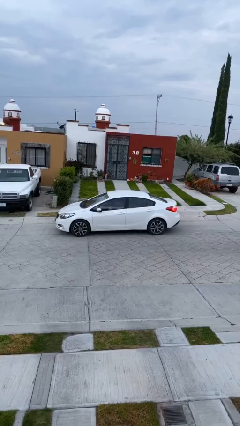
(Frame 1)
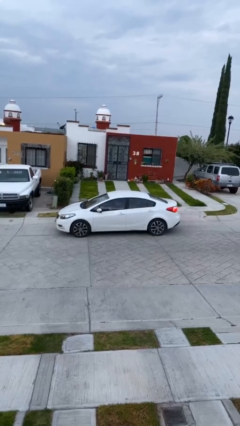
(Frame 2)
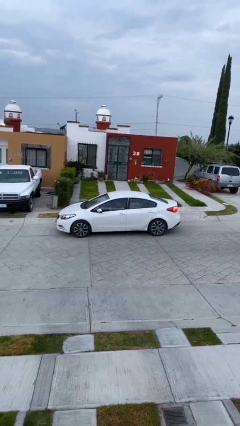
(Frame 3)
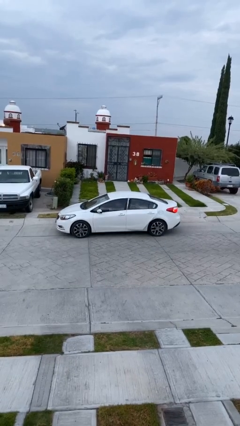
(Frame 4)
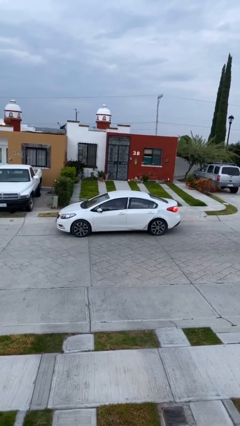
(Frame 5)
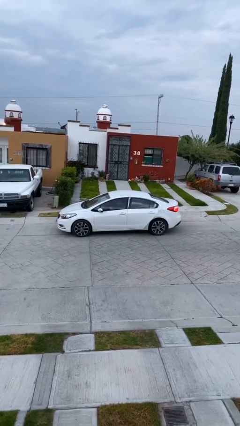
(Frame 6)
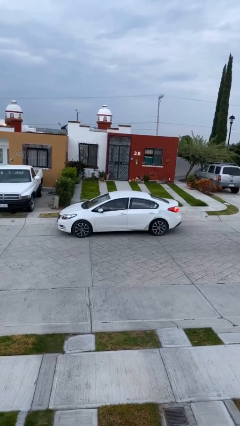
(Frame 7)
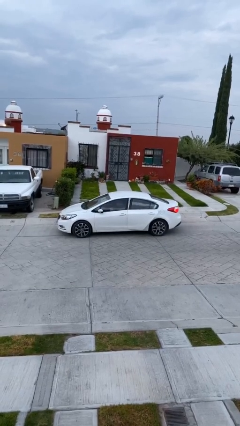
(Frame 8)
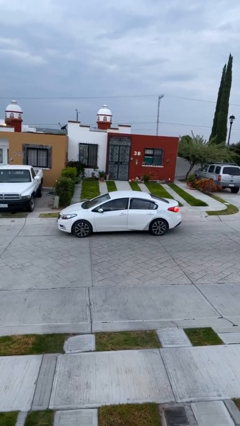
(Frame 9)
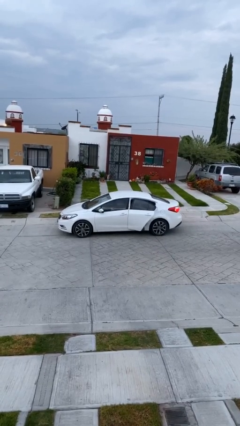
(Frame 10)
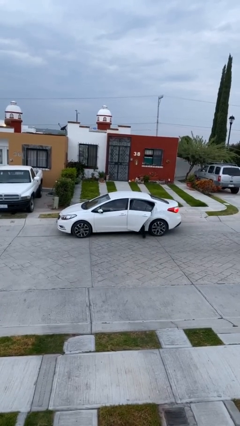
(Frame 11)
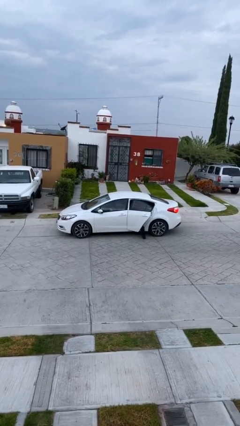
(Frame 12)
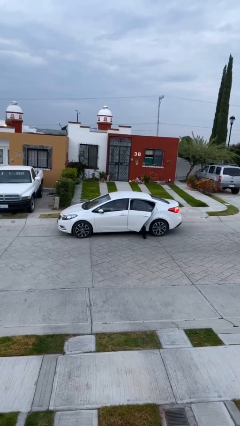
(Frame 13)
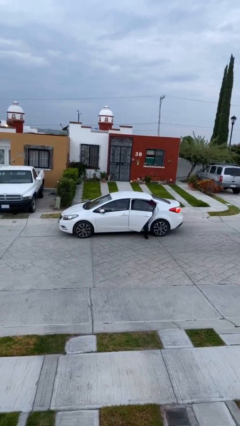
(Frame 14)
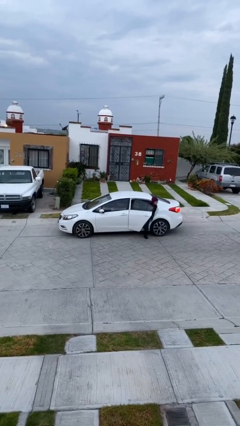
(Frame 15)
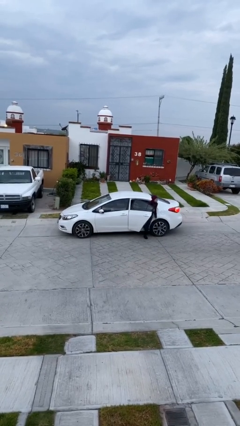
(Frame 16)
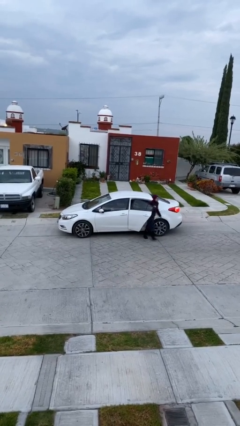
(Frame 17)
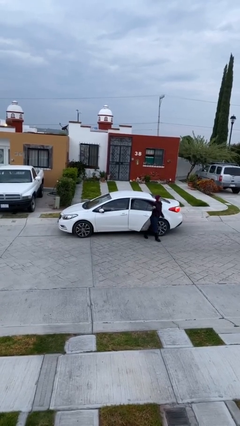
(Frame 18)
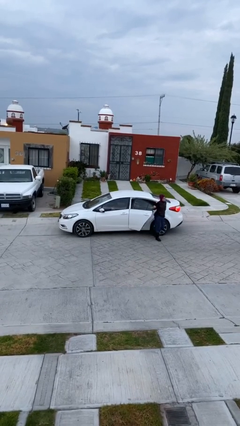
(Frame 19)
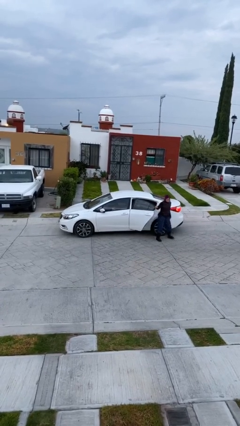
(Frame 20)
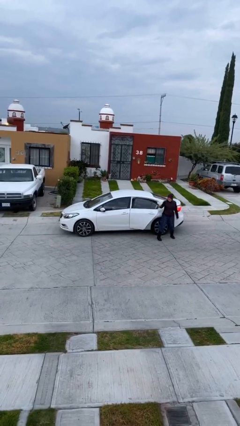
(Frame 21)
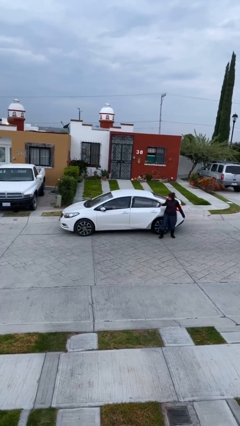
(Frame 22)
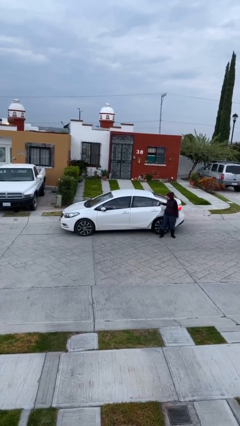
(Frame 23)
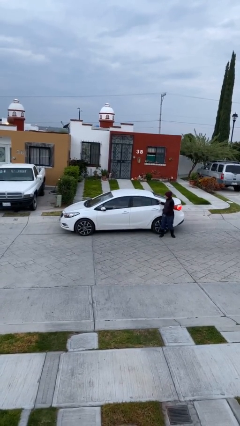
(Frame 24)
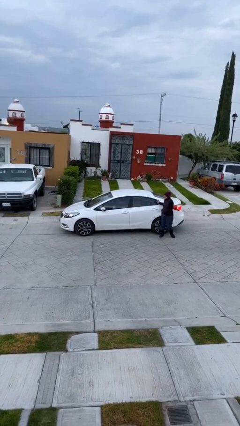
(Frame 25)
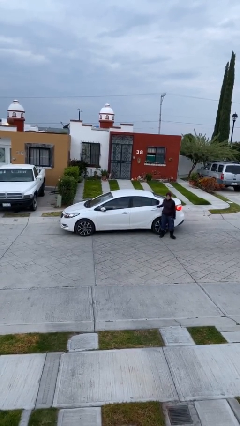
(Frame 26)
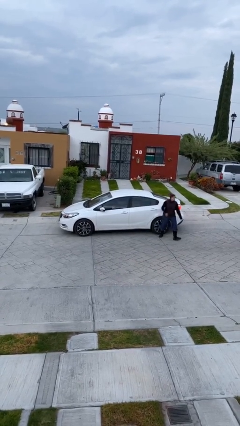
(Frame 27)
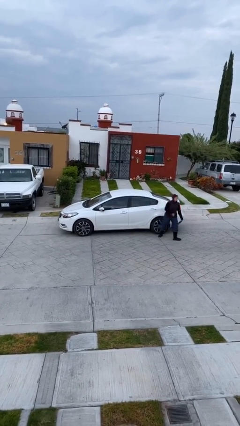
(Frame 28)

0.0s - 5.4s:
car drops off person

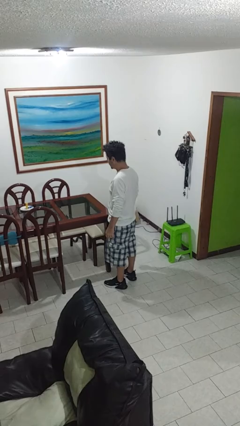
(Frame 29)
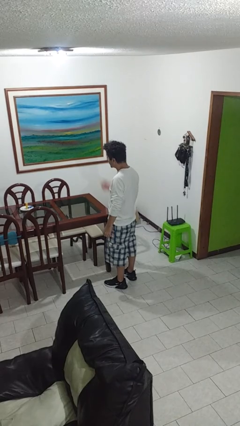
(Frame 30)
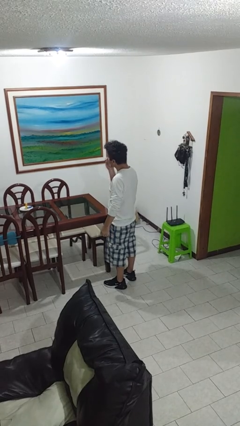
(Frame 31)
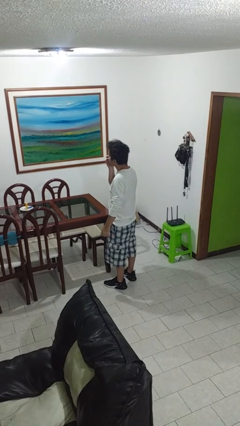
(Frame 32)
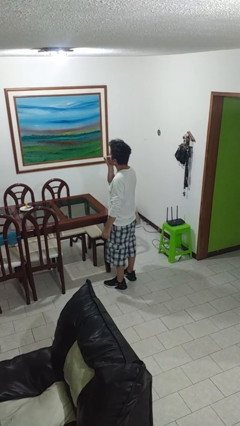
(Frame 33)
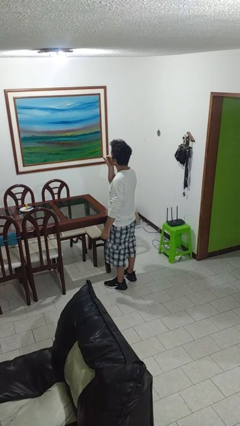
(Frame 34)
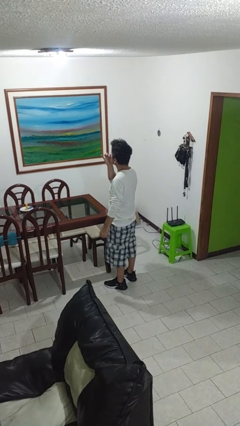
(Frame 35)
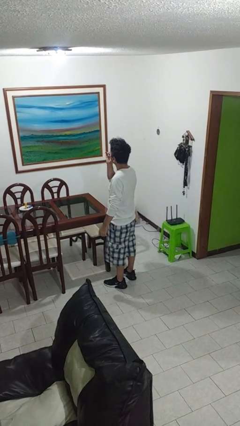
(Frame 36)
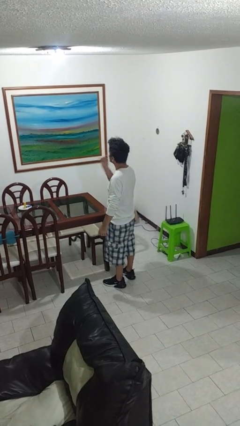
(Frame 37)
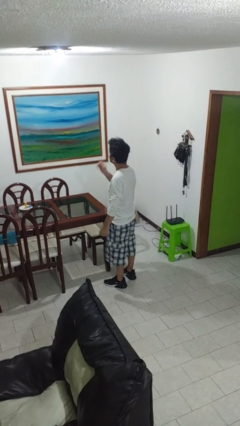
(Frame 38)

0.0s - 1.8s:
person licks fingers

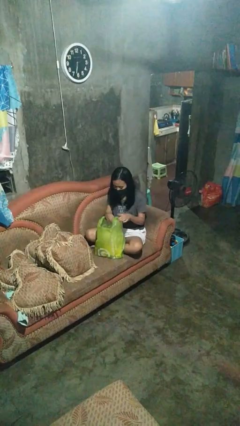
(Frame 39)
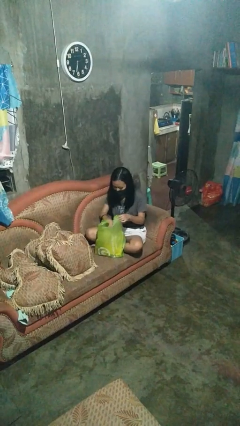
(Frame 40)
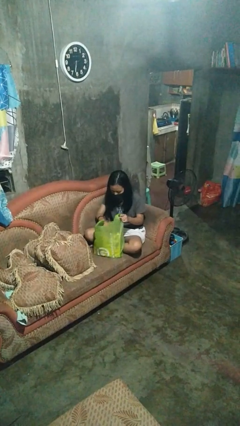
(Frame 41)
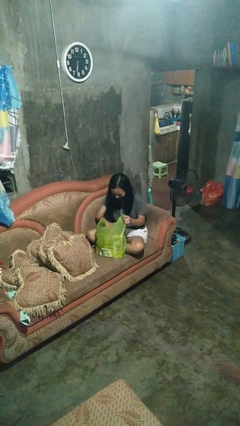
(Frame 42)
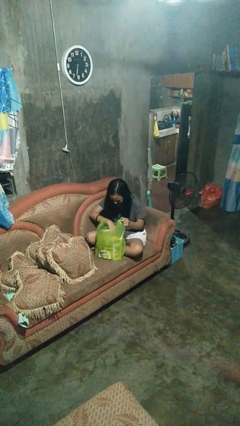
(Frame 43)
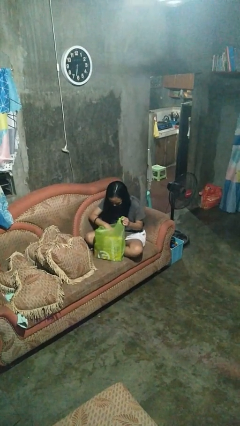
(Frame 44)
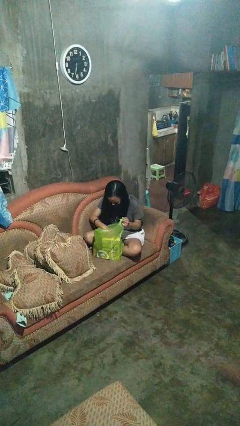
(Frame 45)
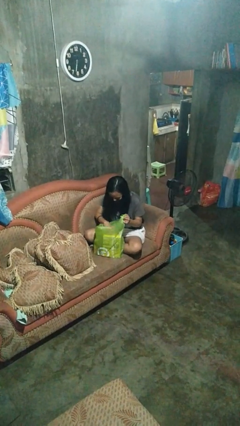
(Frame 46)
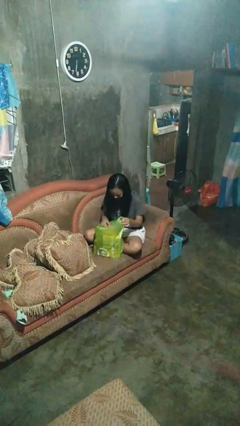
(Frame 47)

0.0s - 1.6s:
person searches in bag

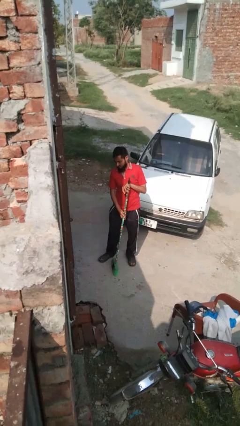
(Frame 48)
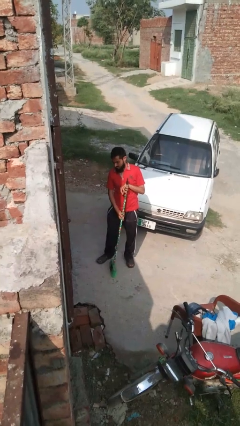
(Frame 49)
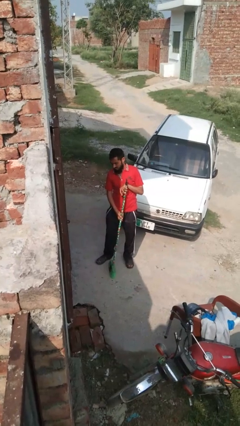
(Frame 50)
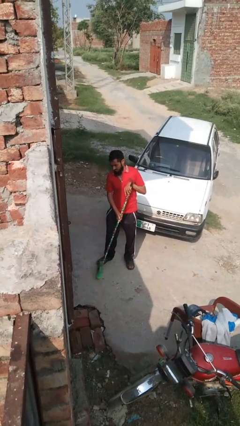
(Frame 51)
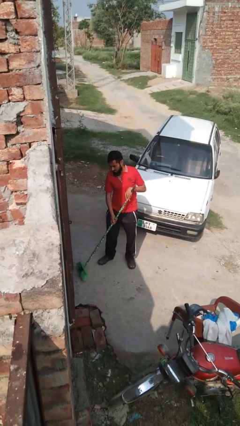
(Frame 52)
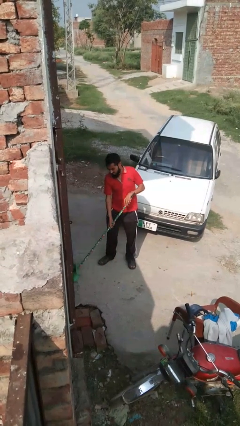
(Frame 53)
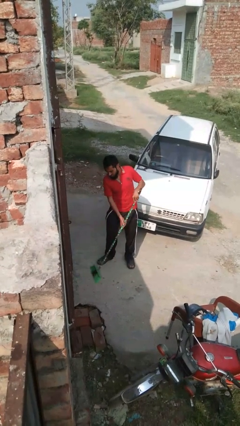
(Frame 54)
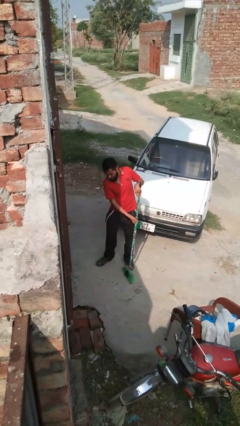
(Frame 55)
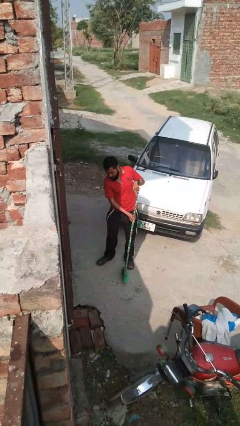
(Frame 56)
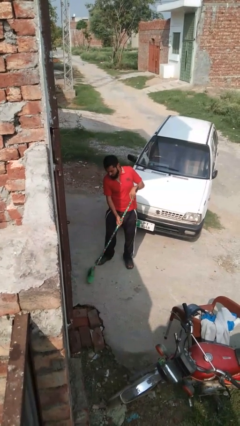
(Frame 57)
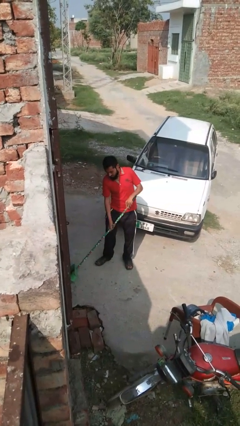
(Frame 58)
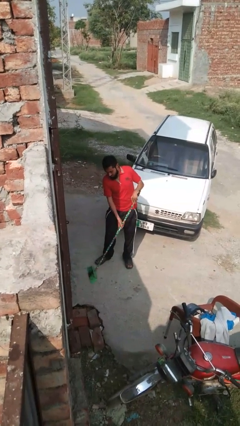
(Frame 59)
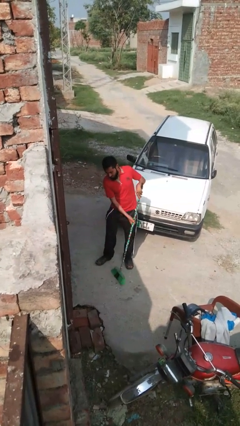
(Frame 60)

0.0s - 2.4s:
person sweeps floor

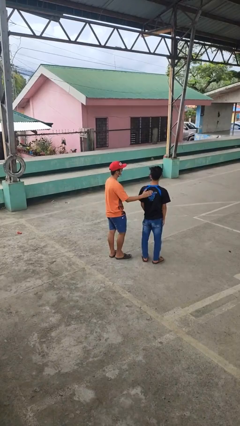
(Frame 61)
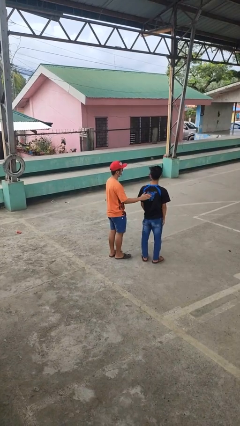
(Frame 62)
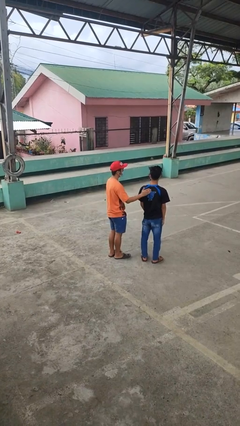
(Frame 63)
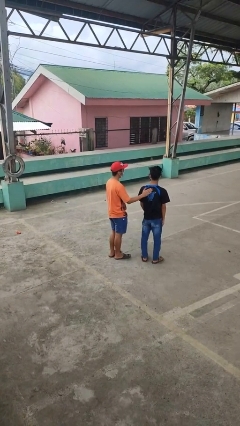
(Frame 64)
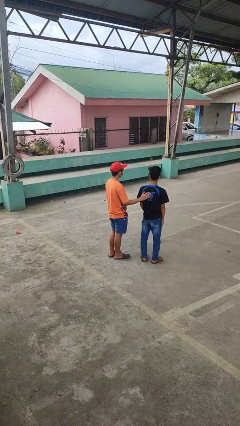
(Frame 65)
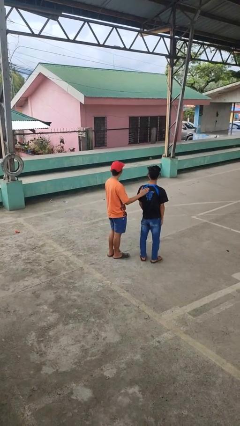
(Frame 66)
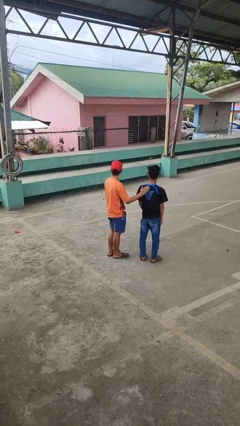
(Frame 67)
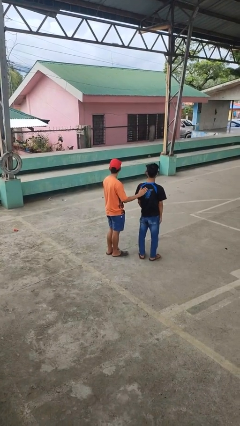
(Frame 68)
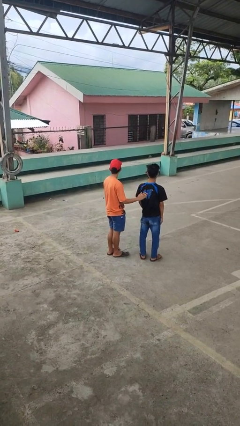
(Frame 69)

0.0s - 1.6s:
person touches back of person

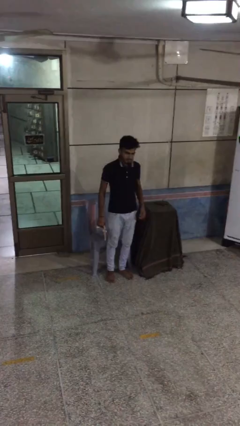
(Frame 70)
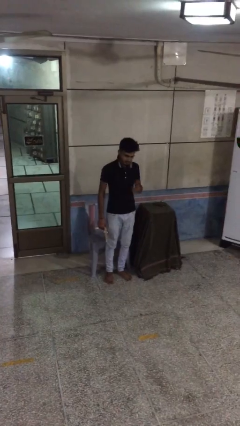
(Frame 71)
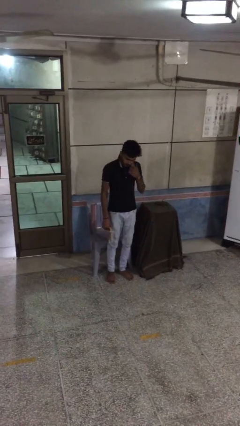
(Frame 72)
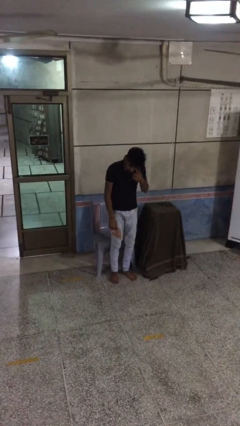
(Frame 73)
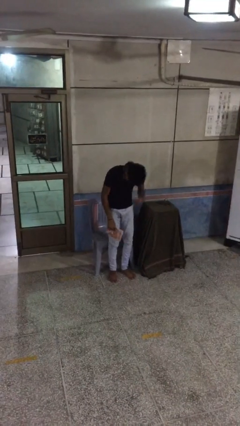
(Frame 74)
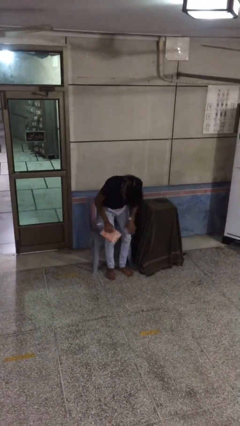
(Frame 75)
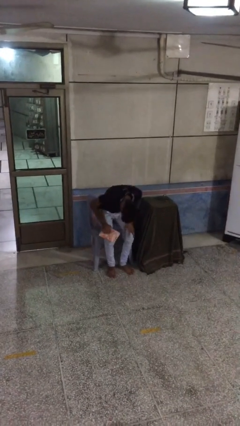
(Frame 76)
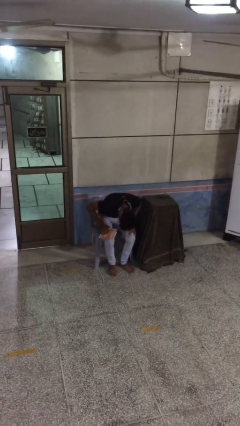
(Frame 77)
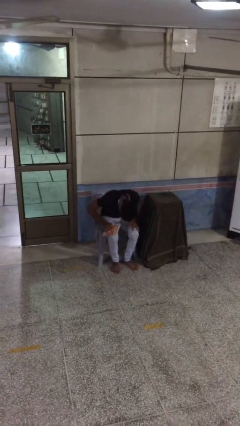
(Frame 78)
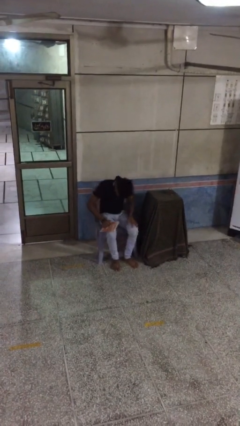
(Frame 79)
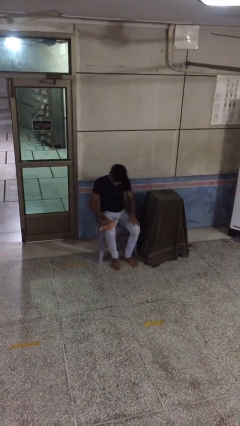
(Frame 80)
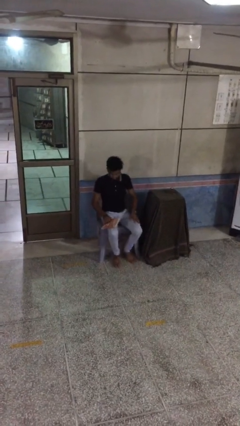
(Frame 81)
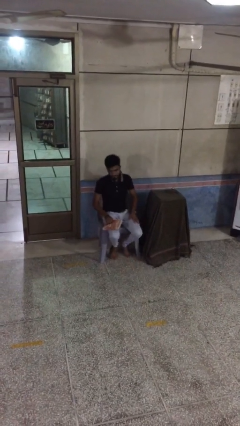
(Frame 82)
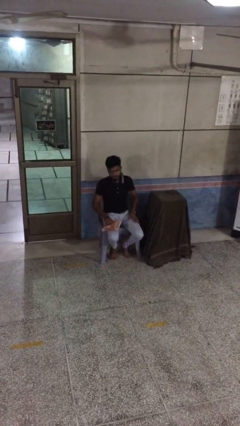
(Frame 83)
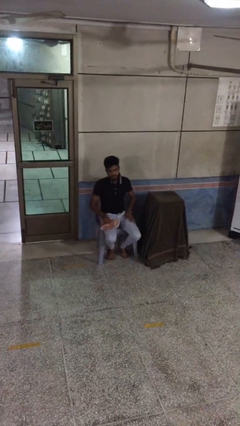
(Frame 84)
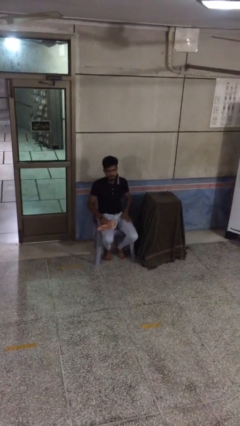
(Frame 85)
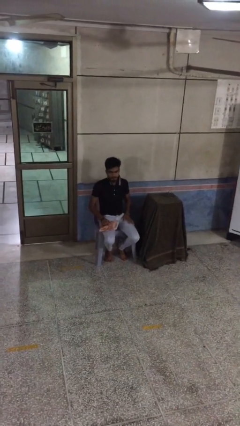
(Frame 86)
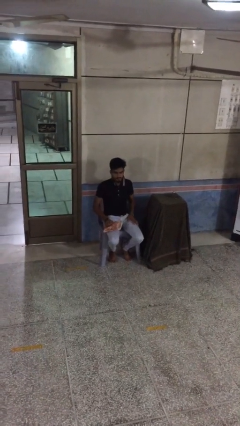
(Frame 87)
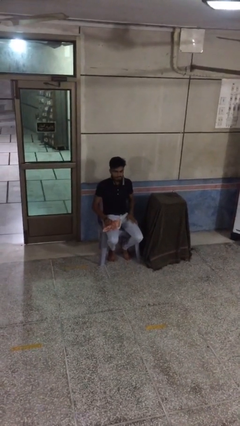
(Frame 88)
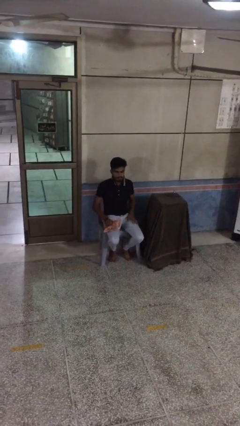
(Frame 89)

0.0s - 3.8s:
person sits down

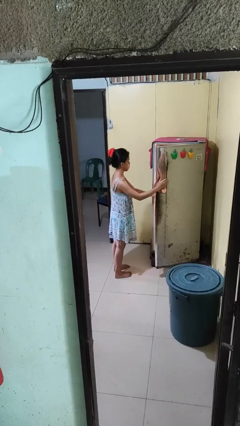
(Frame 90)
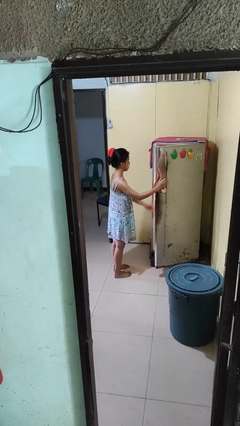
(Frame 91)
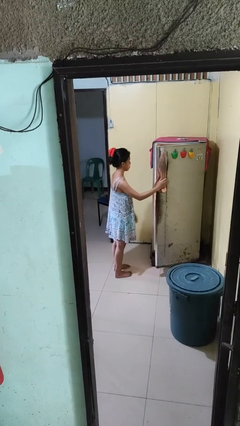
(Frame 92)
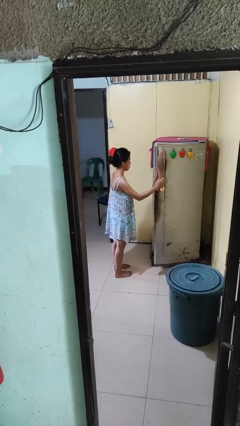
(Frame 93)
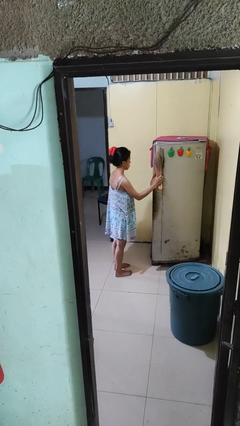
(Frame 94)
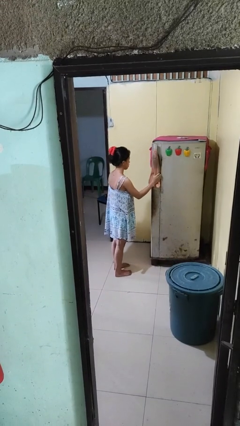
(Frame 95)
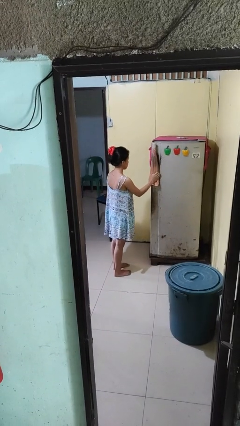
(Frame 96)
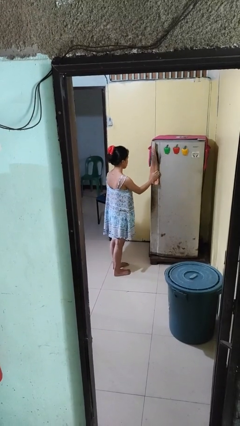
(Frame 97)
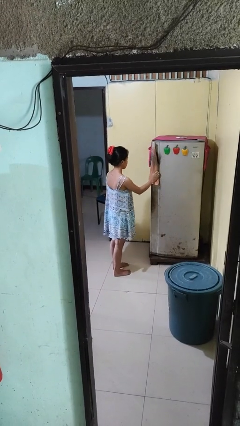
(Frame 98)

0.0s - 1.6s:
person closes refrigerator
